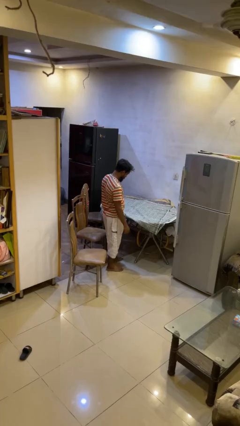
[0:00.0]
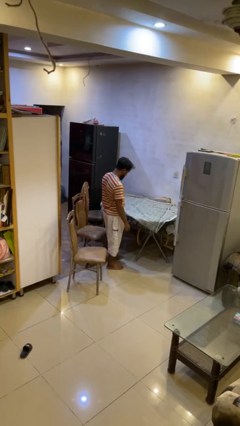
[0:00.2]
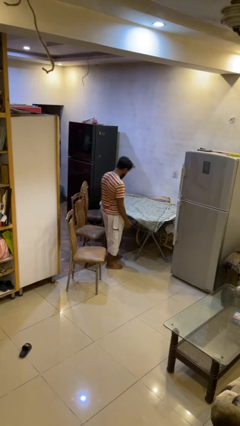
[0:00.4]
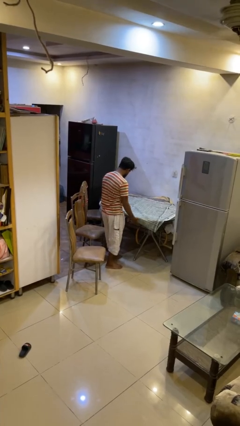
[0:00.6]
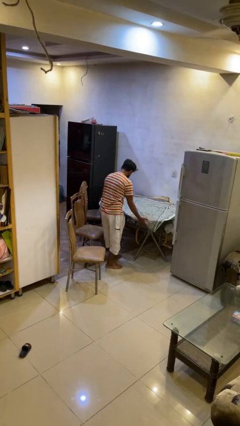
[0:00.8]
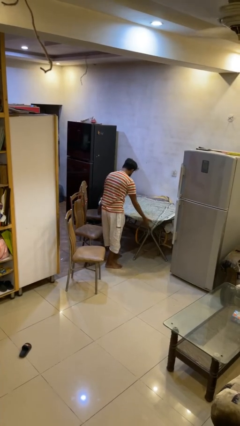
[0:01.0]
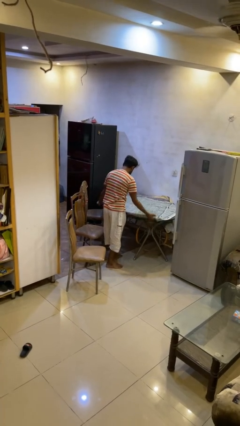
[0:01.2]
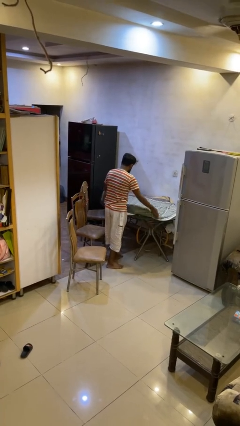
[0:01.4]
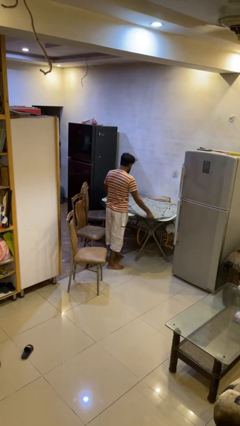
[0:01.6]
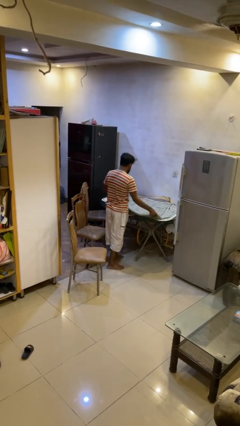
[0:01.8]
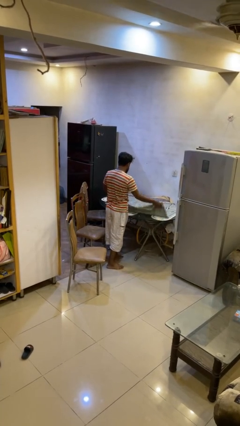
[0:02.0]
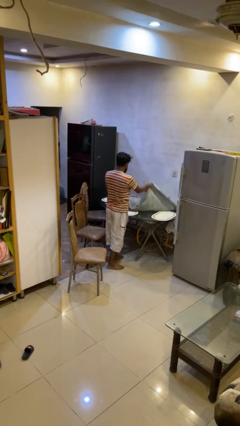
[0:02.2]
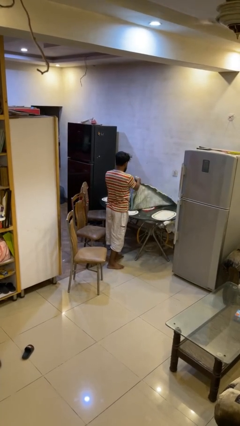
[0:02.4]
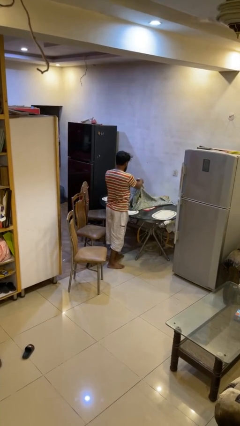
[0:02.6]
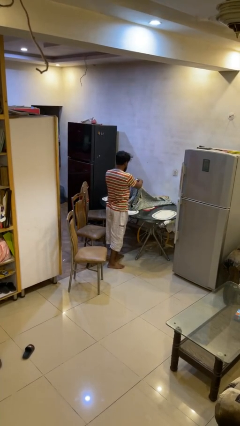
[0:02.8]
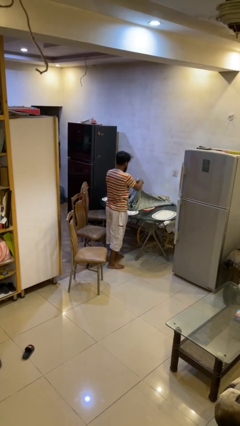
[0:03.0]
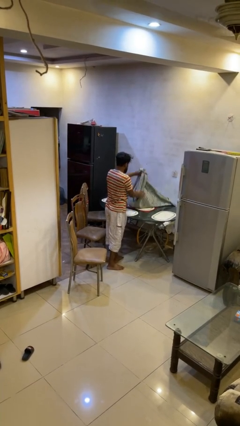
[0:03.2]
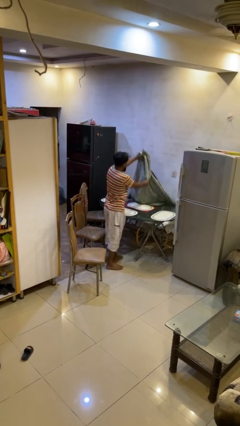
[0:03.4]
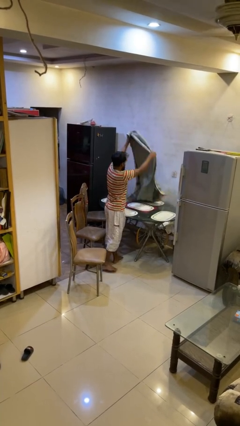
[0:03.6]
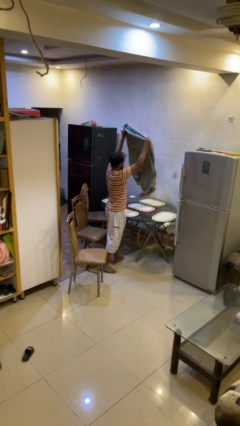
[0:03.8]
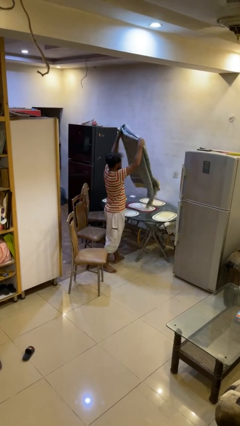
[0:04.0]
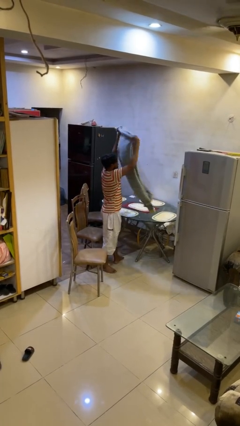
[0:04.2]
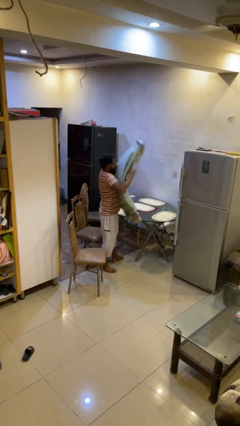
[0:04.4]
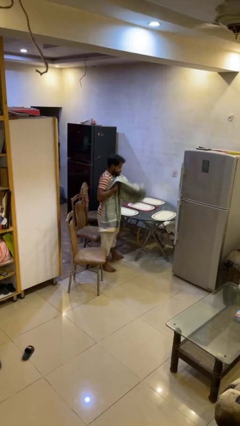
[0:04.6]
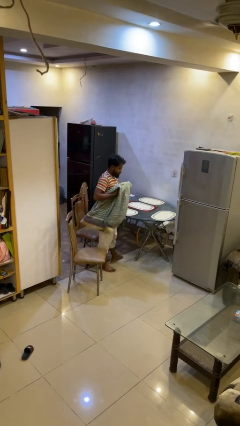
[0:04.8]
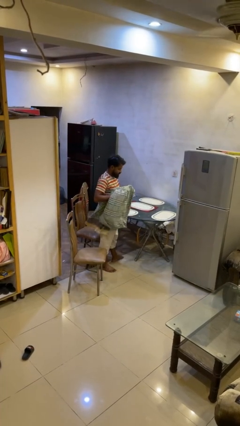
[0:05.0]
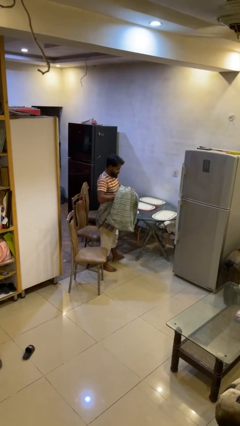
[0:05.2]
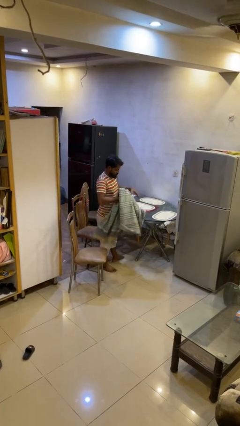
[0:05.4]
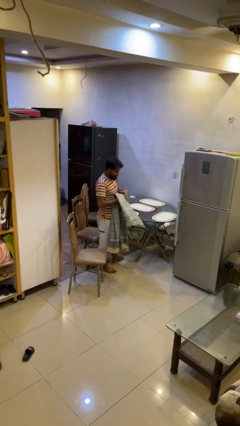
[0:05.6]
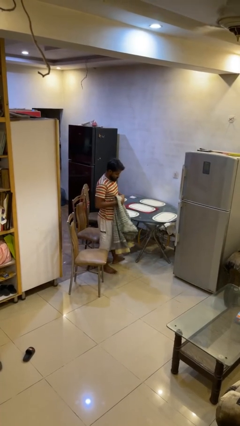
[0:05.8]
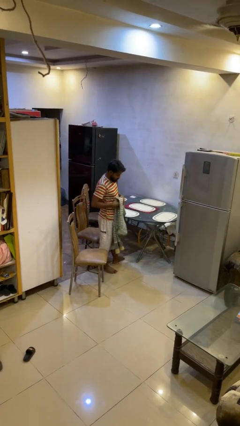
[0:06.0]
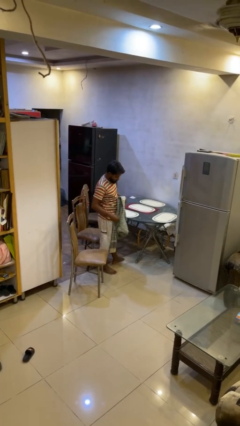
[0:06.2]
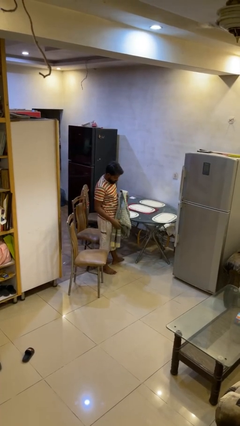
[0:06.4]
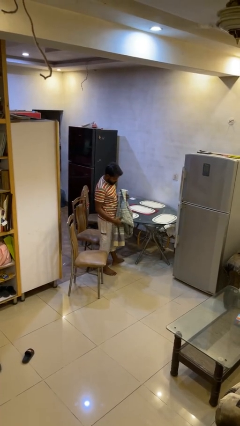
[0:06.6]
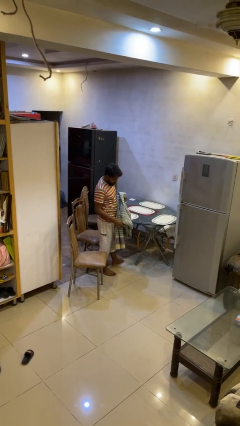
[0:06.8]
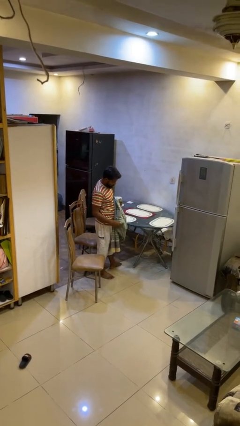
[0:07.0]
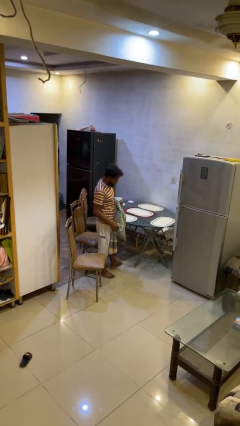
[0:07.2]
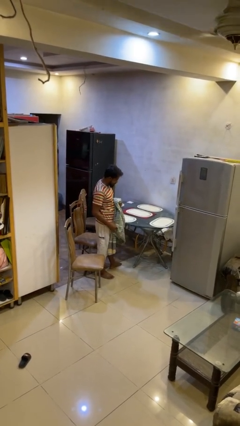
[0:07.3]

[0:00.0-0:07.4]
person folds tablecloth

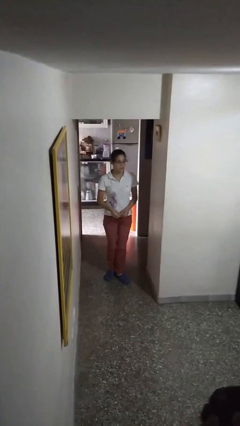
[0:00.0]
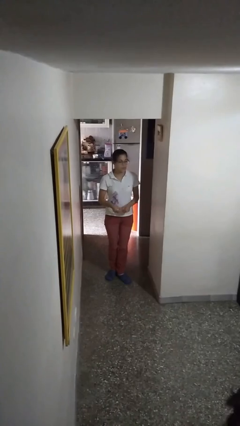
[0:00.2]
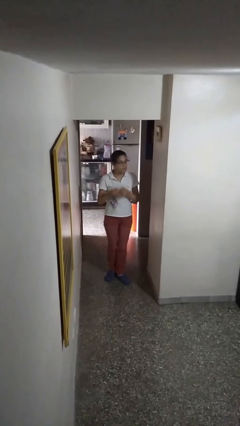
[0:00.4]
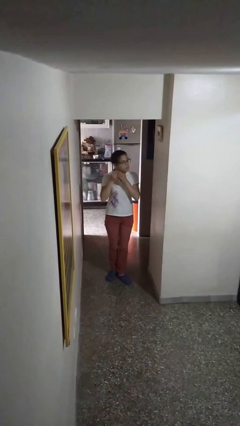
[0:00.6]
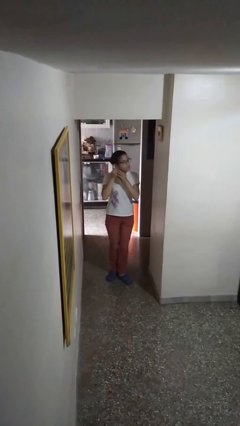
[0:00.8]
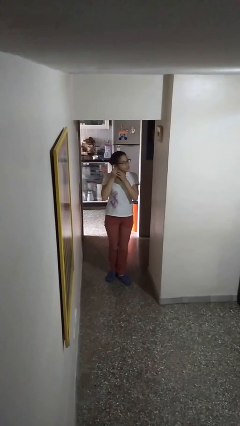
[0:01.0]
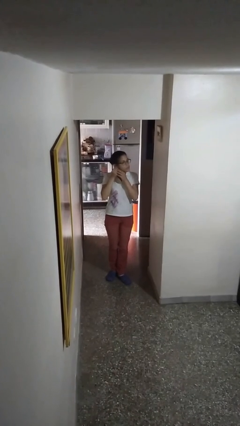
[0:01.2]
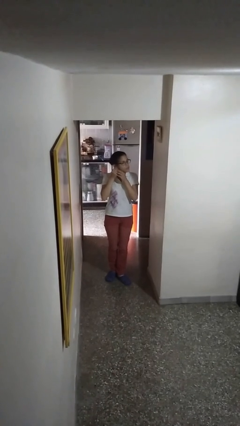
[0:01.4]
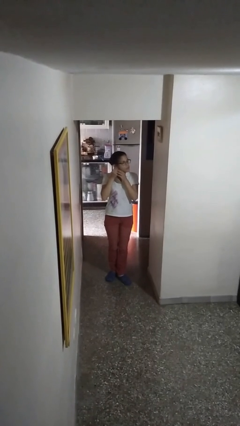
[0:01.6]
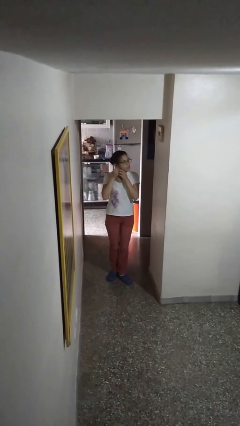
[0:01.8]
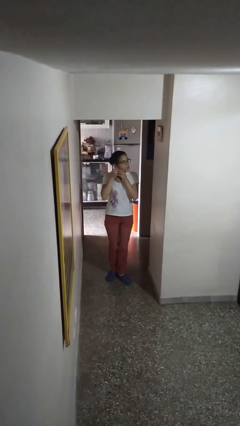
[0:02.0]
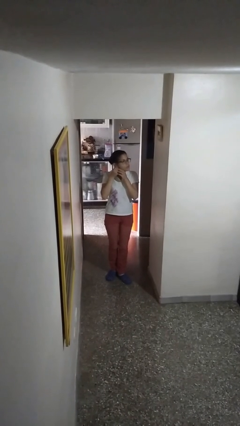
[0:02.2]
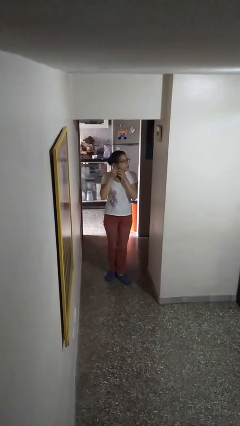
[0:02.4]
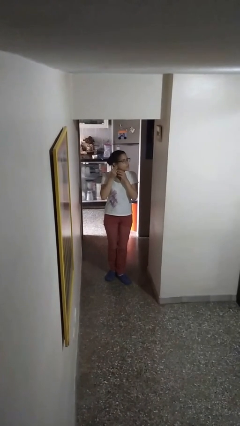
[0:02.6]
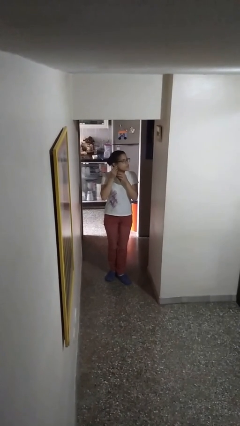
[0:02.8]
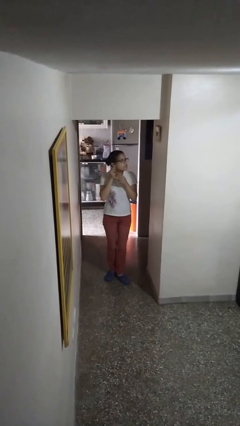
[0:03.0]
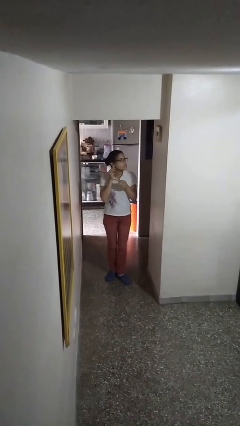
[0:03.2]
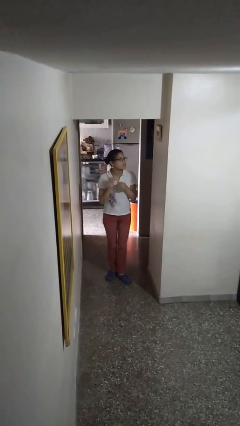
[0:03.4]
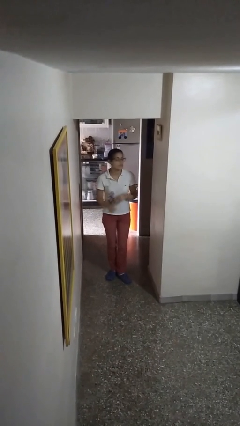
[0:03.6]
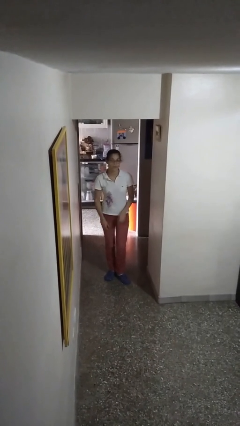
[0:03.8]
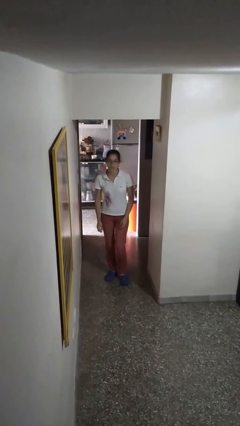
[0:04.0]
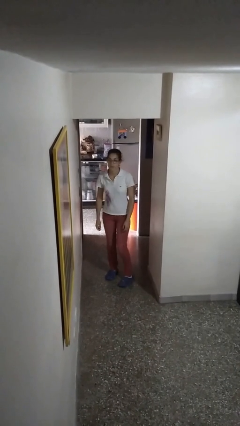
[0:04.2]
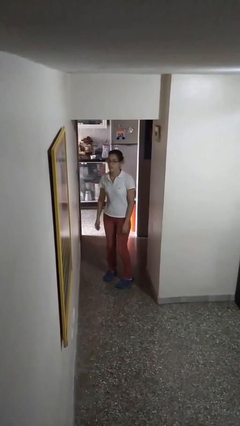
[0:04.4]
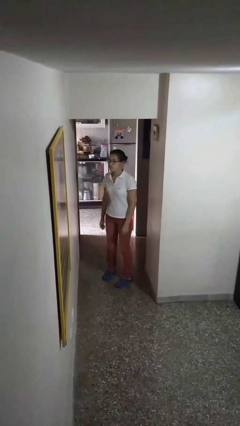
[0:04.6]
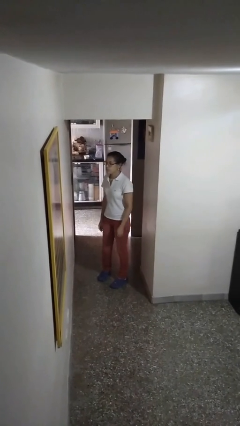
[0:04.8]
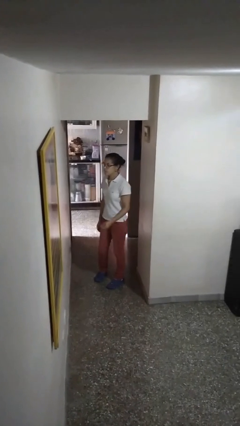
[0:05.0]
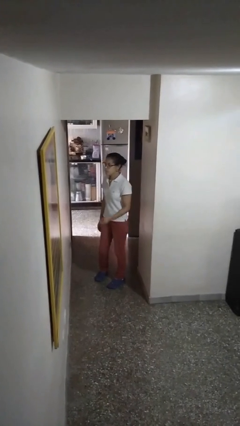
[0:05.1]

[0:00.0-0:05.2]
person puts on earrings

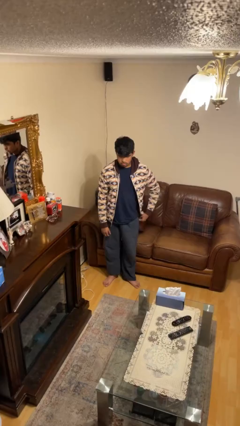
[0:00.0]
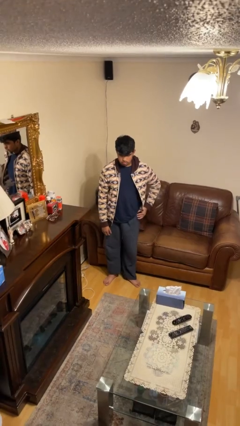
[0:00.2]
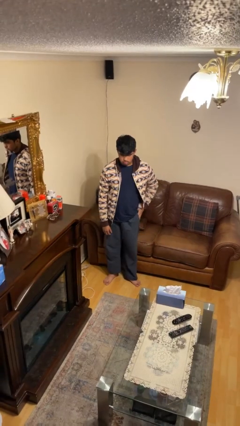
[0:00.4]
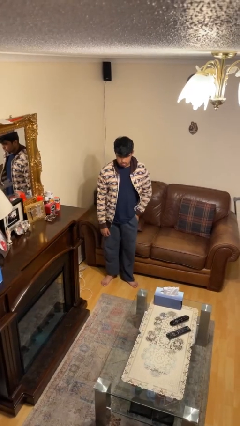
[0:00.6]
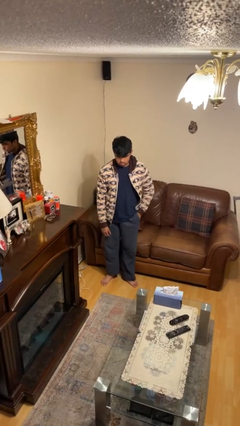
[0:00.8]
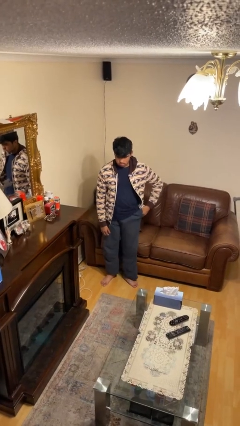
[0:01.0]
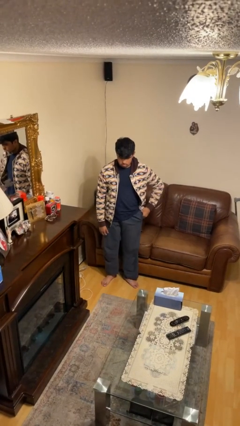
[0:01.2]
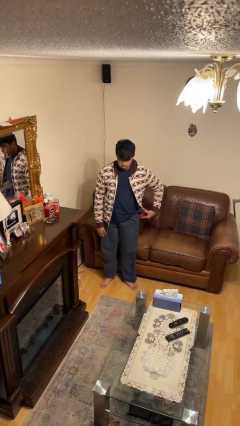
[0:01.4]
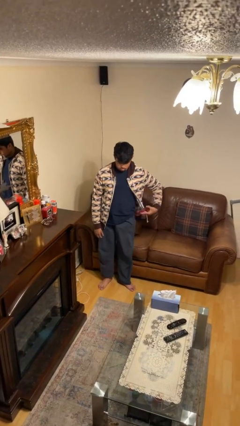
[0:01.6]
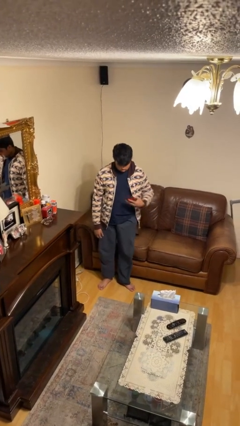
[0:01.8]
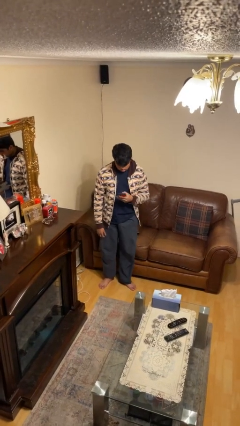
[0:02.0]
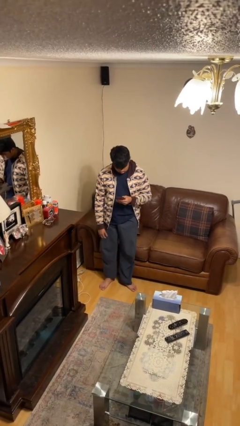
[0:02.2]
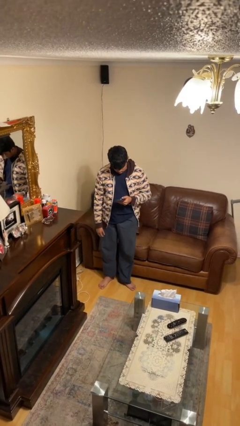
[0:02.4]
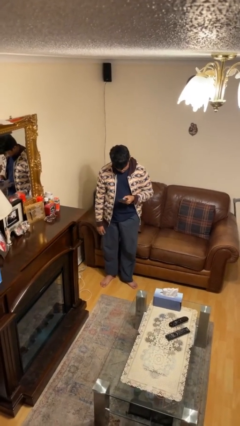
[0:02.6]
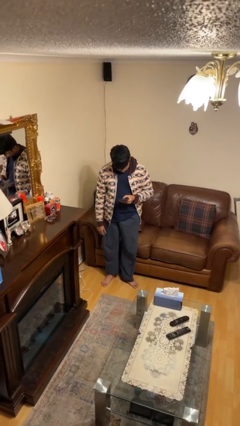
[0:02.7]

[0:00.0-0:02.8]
person takes phone from pocket

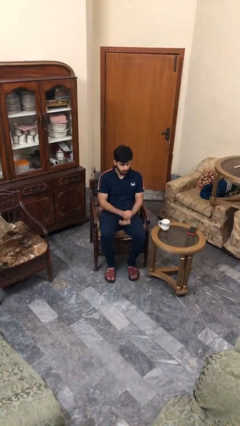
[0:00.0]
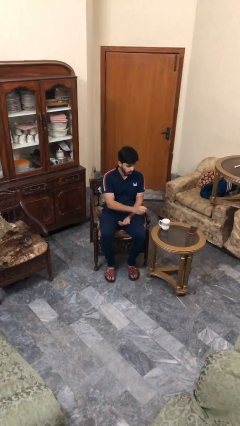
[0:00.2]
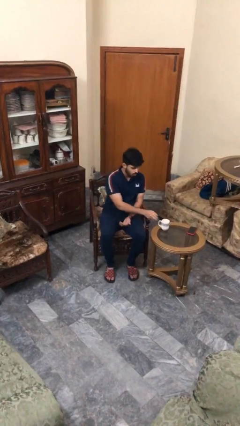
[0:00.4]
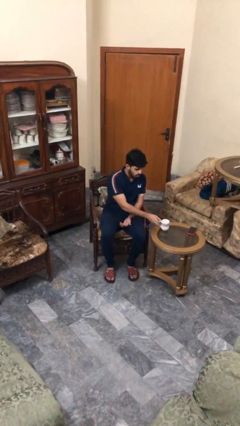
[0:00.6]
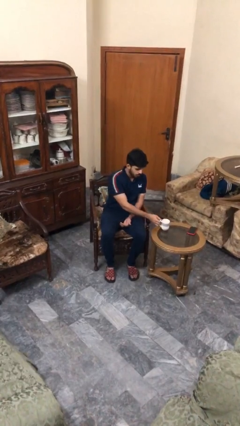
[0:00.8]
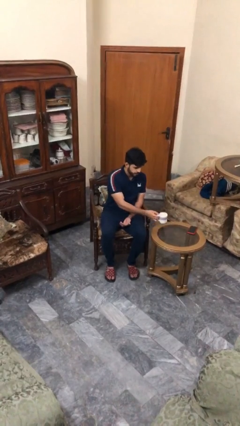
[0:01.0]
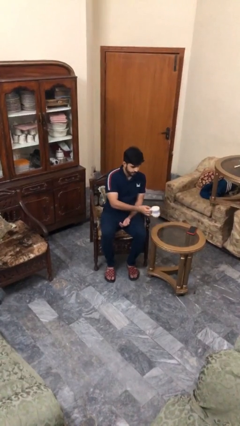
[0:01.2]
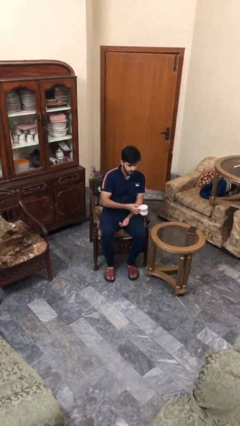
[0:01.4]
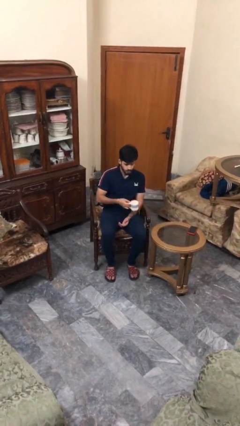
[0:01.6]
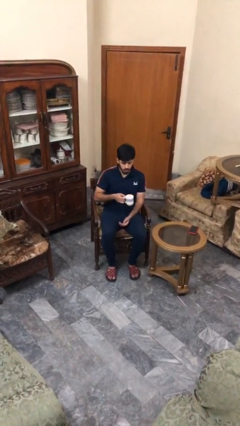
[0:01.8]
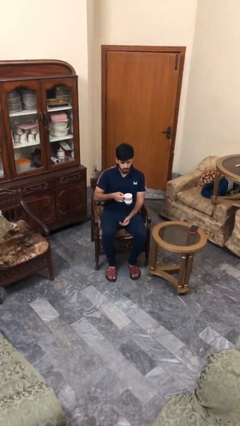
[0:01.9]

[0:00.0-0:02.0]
person picks up object from table
